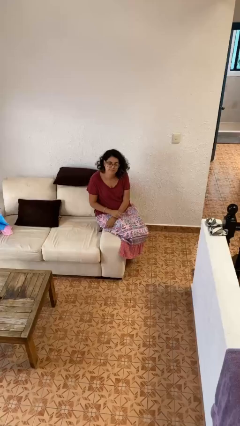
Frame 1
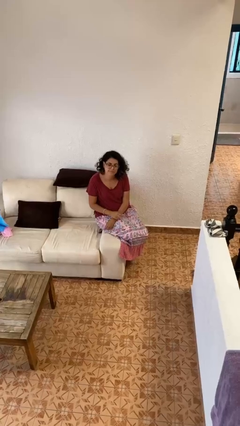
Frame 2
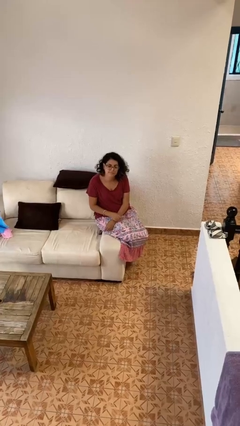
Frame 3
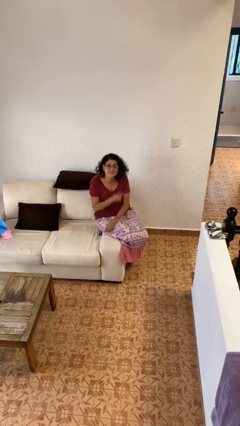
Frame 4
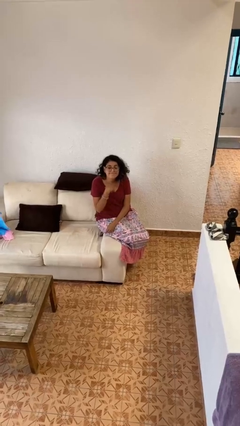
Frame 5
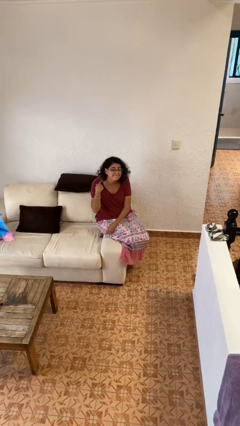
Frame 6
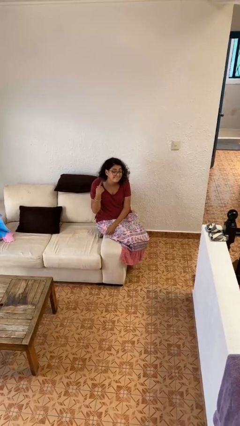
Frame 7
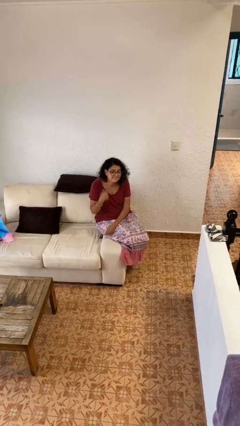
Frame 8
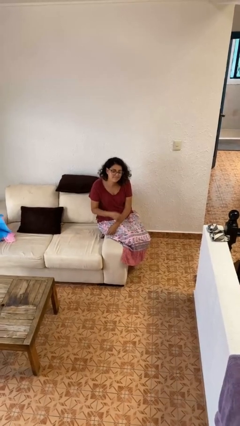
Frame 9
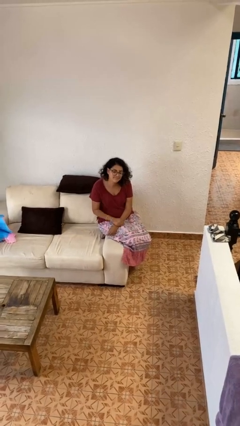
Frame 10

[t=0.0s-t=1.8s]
person gestures cut

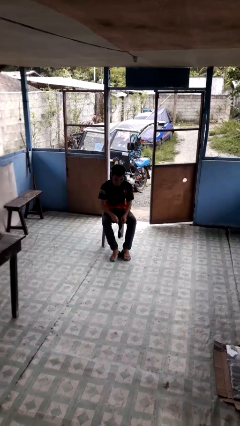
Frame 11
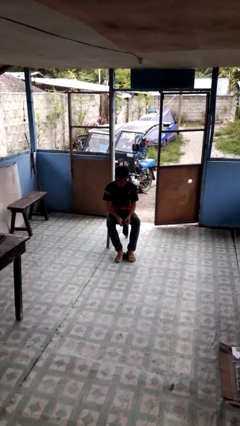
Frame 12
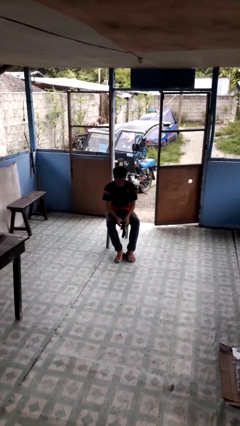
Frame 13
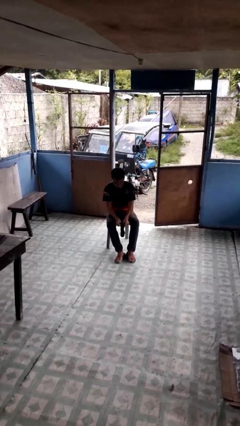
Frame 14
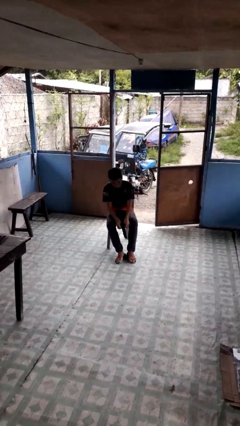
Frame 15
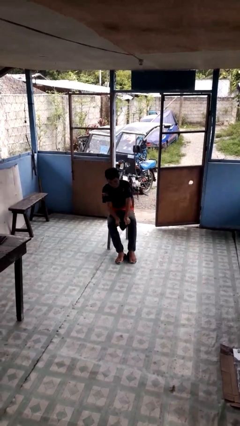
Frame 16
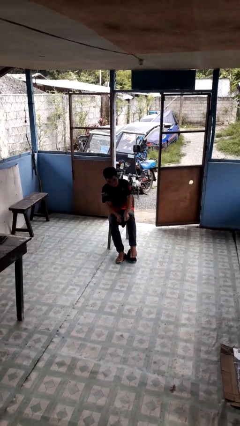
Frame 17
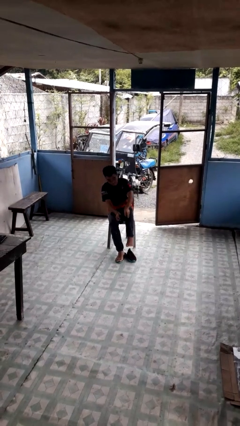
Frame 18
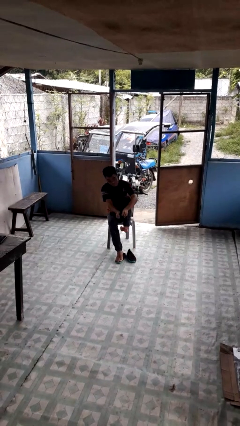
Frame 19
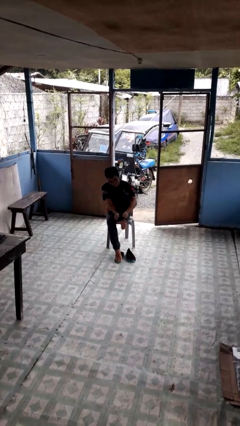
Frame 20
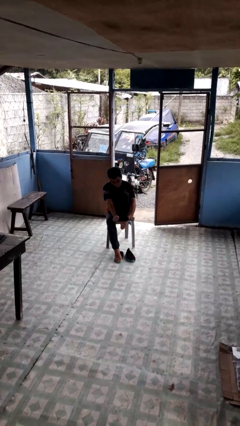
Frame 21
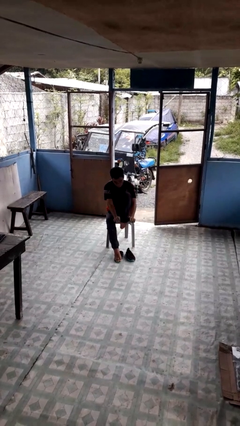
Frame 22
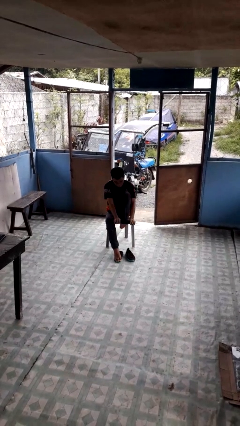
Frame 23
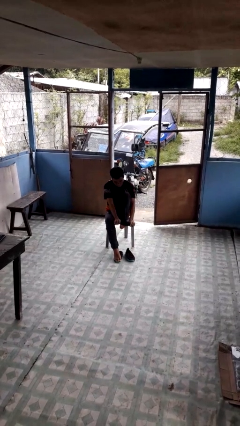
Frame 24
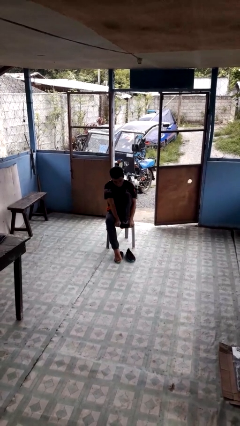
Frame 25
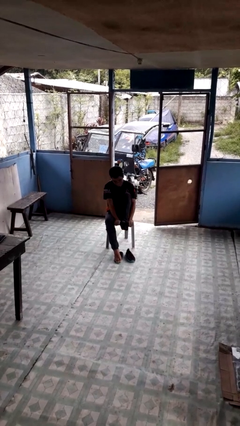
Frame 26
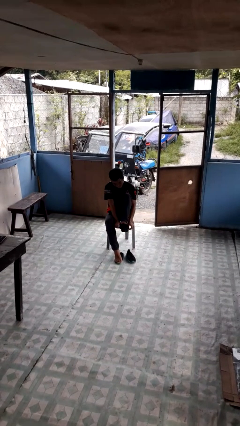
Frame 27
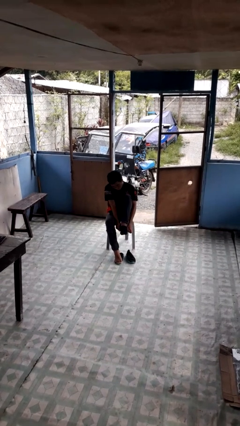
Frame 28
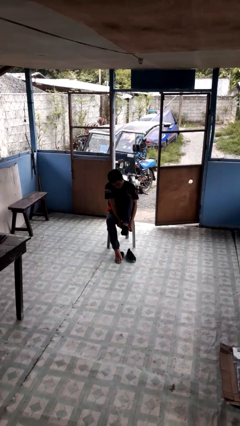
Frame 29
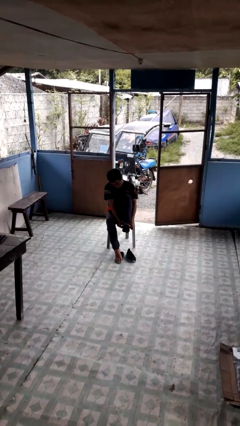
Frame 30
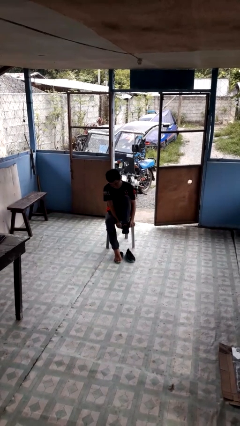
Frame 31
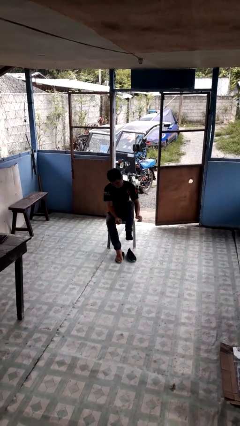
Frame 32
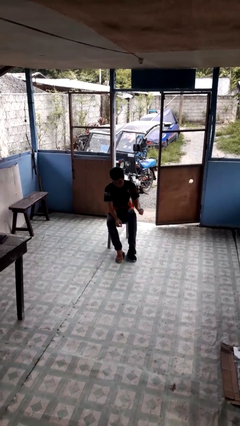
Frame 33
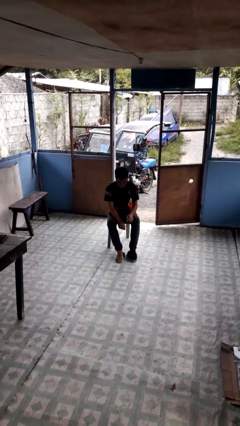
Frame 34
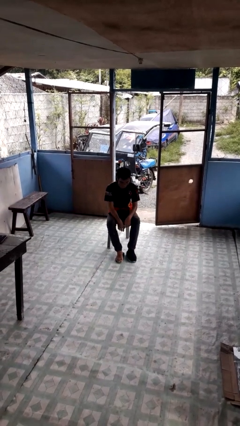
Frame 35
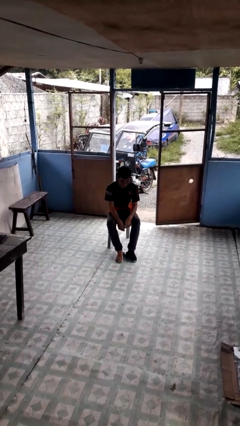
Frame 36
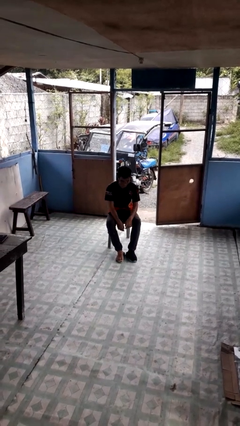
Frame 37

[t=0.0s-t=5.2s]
person puts on socks

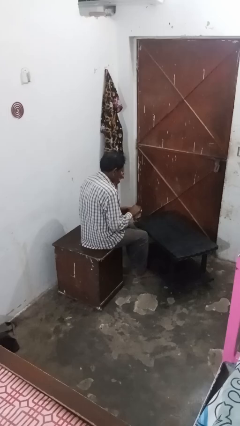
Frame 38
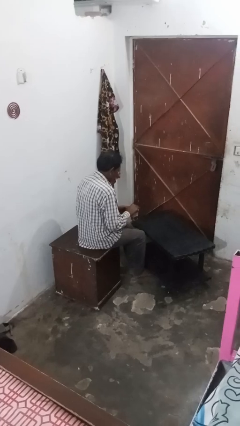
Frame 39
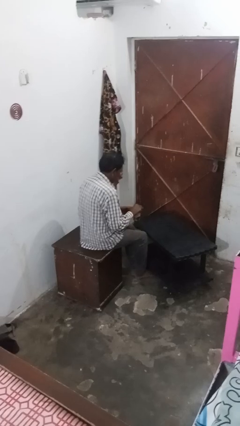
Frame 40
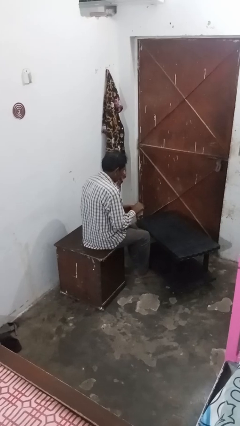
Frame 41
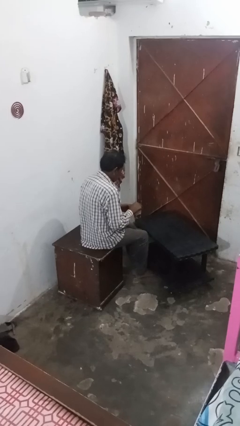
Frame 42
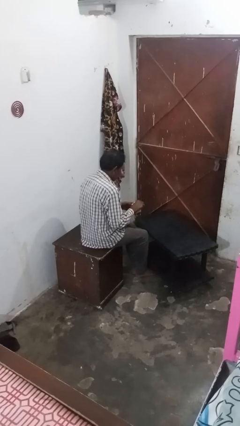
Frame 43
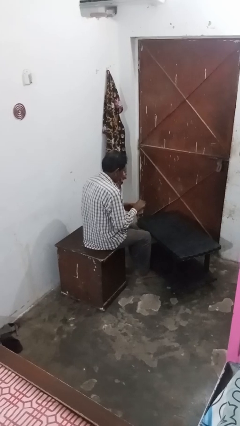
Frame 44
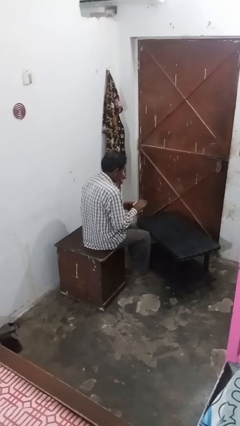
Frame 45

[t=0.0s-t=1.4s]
person stirs mug

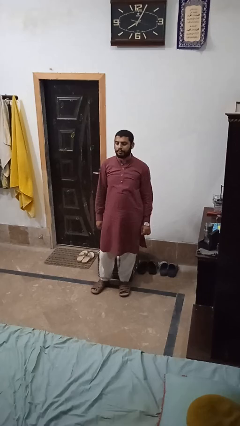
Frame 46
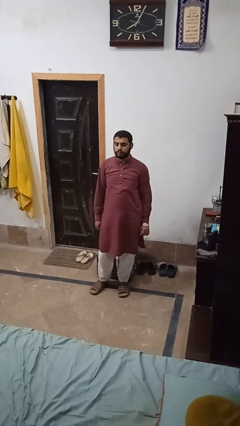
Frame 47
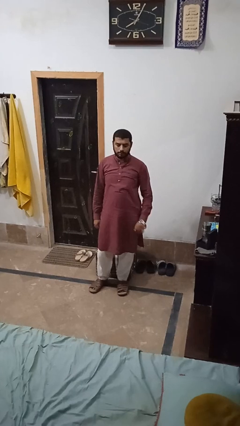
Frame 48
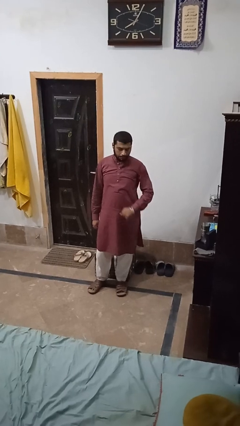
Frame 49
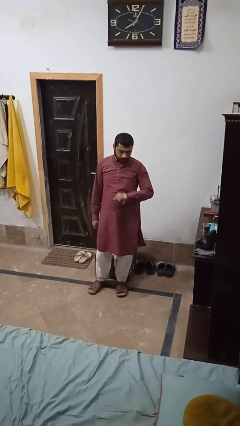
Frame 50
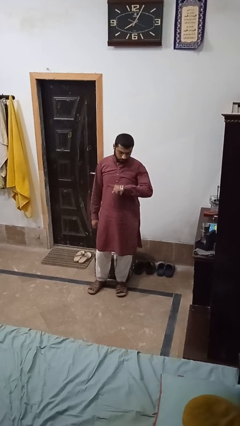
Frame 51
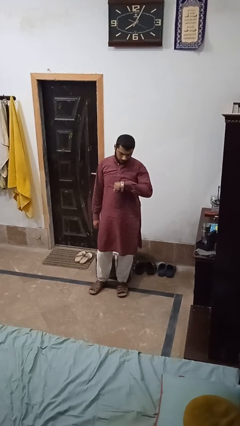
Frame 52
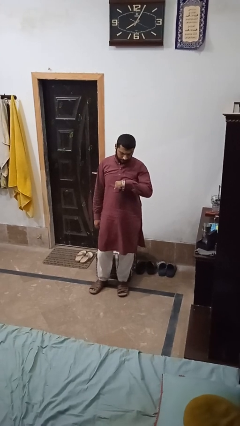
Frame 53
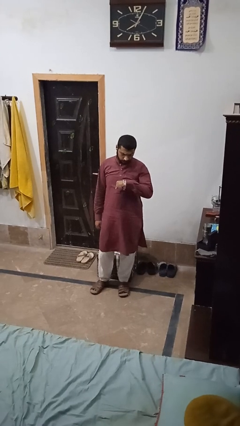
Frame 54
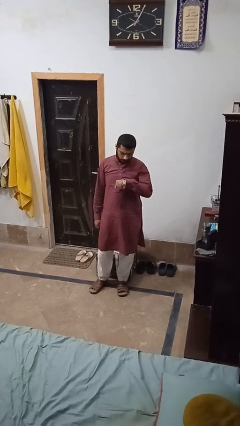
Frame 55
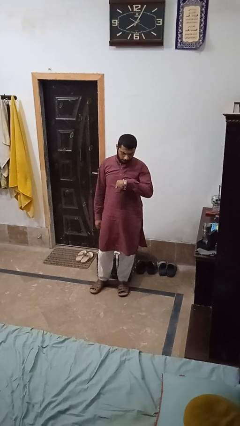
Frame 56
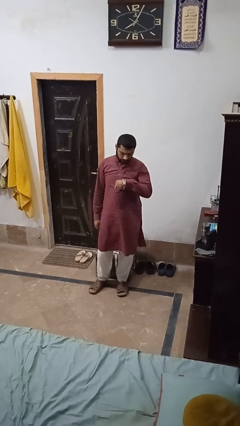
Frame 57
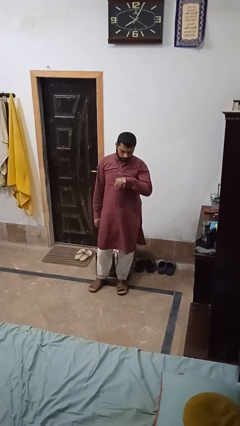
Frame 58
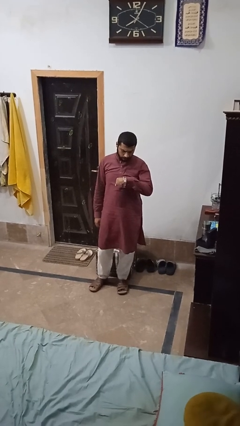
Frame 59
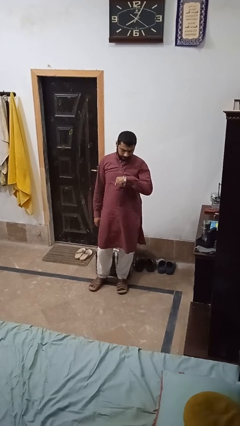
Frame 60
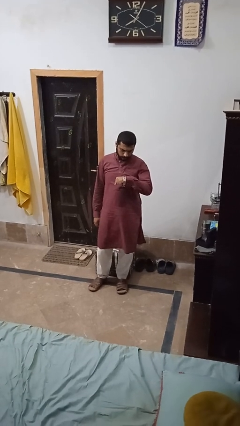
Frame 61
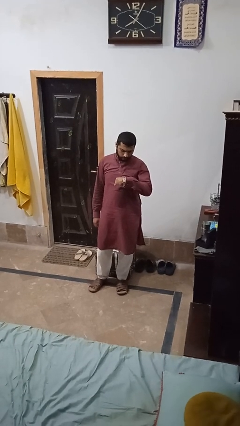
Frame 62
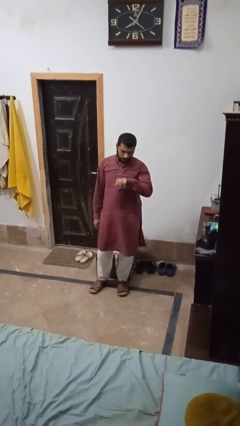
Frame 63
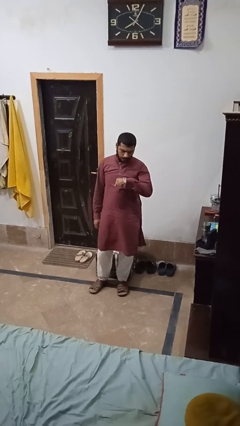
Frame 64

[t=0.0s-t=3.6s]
person looks at wristwatch

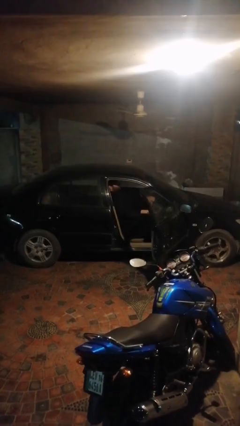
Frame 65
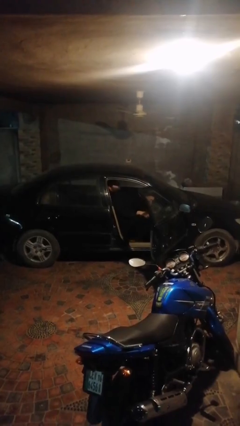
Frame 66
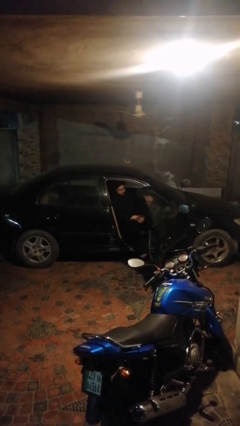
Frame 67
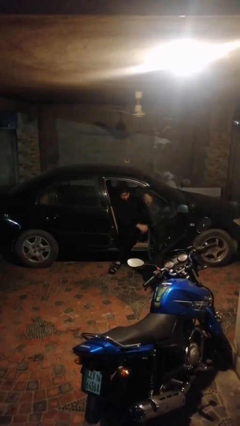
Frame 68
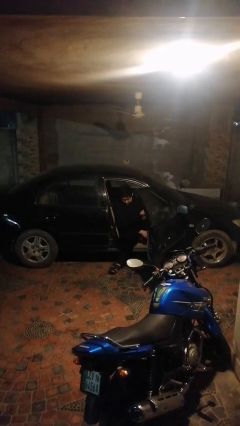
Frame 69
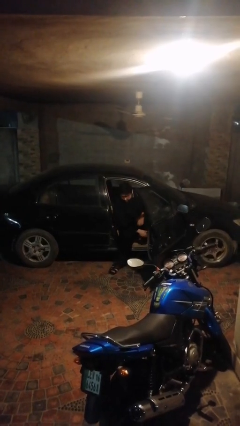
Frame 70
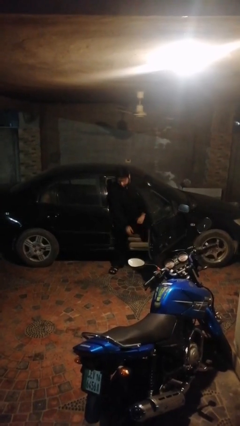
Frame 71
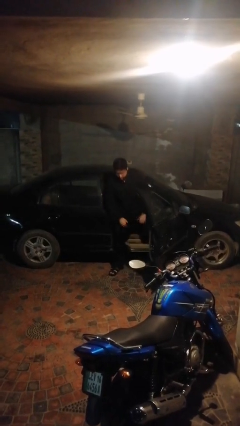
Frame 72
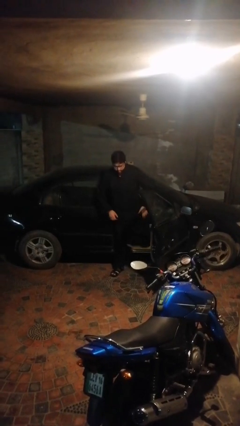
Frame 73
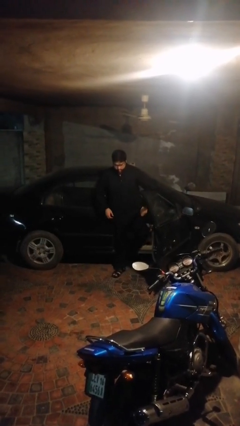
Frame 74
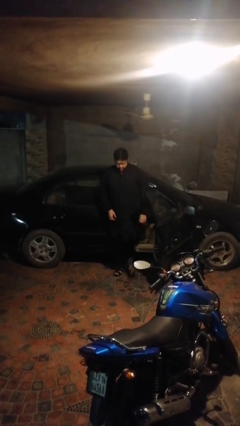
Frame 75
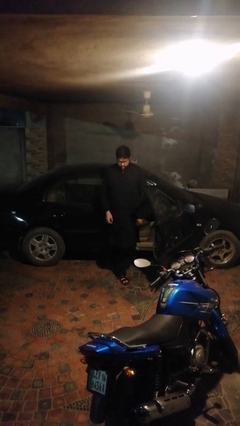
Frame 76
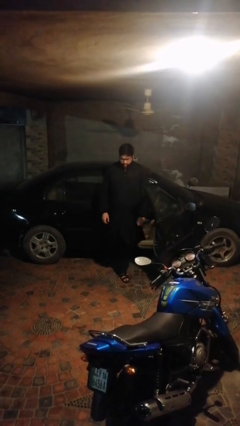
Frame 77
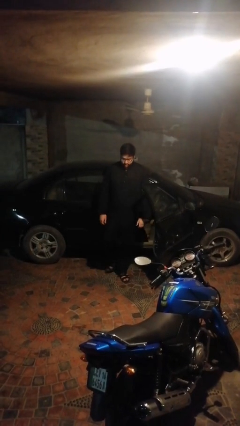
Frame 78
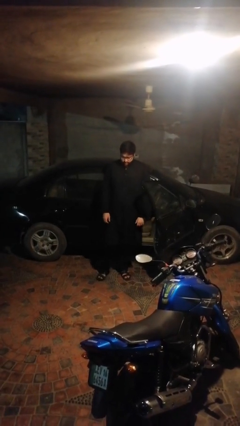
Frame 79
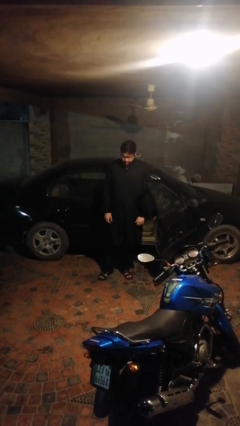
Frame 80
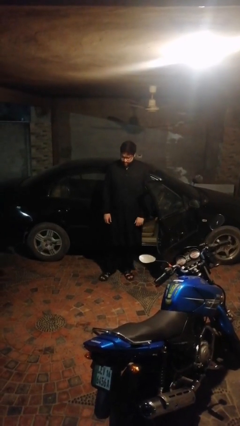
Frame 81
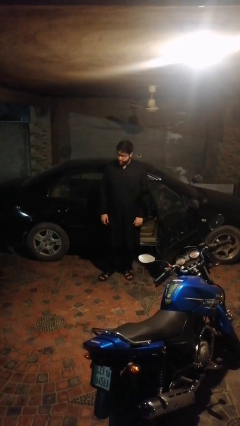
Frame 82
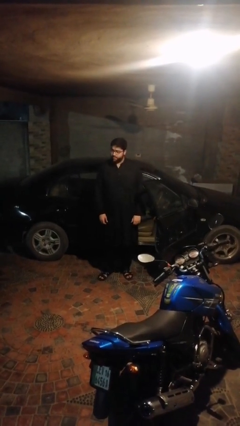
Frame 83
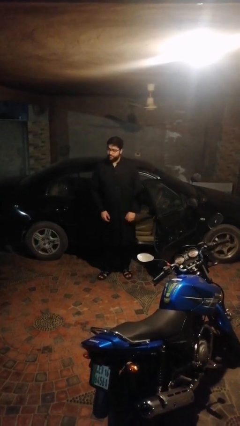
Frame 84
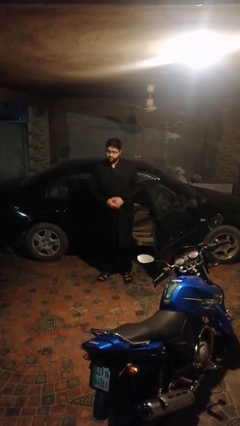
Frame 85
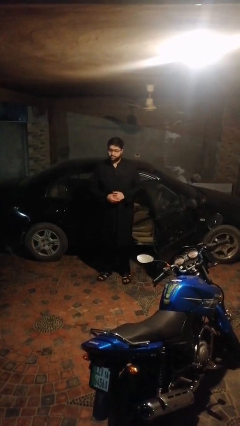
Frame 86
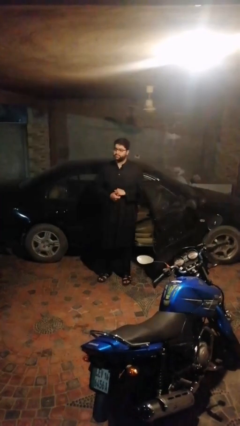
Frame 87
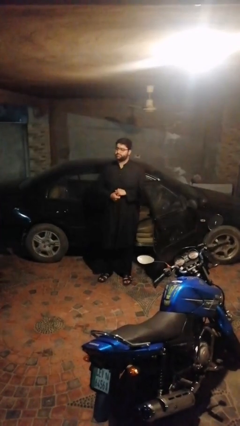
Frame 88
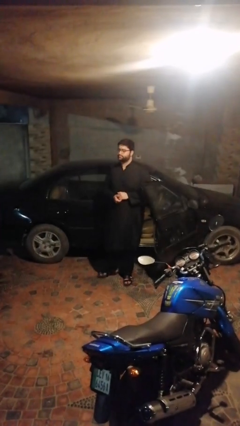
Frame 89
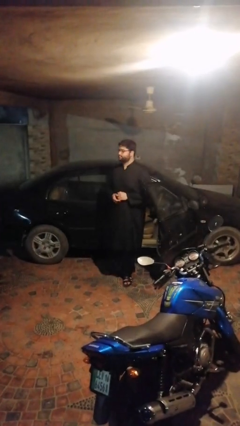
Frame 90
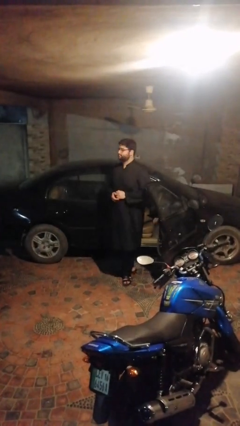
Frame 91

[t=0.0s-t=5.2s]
person exits car

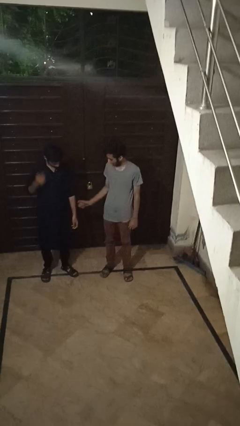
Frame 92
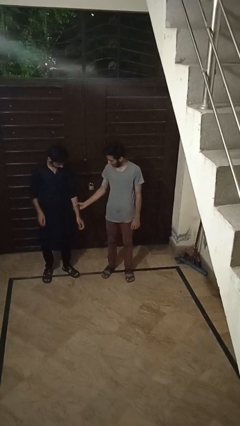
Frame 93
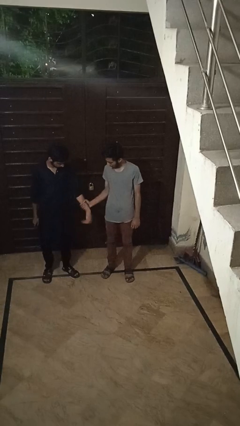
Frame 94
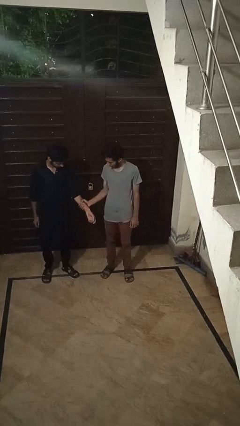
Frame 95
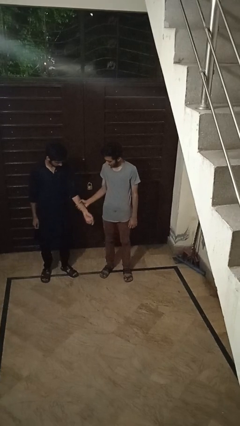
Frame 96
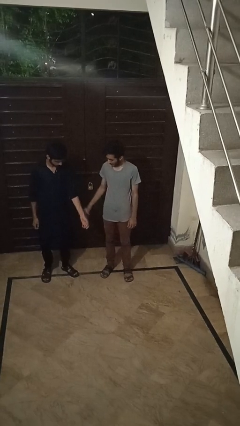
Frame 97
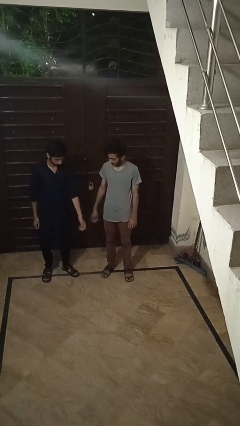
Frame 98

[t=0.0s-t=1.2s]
person grabs person by forearm
